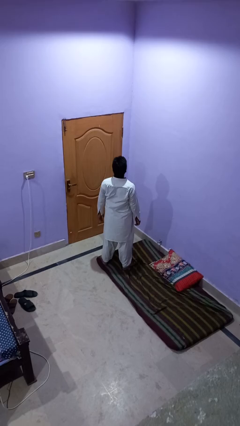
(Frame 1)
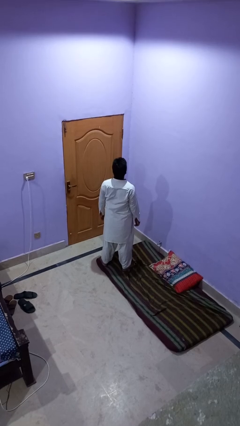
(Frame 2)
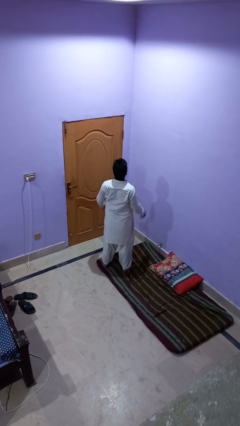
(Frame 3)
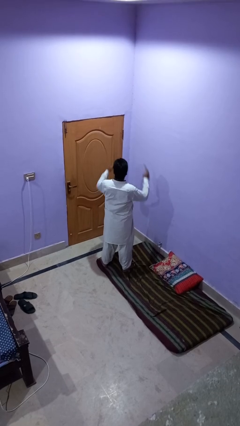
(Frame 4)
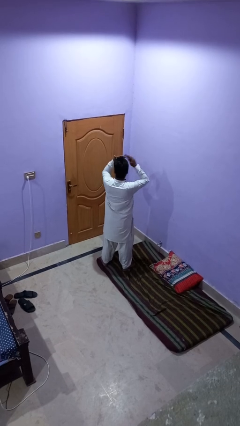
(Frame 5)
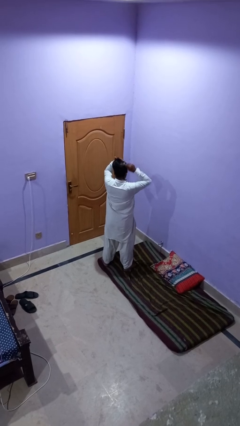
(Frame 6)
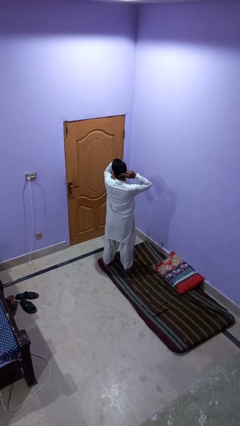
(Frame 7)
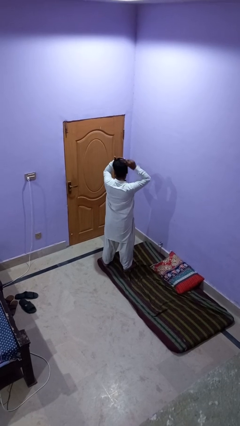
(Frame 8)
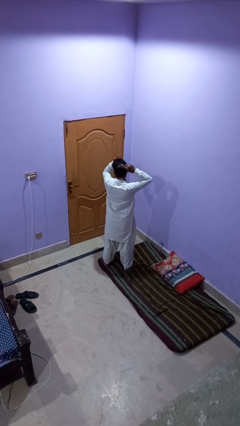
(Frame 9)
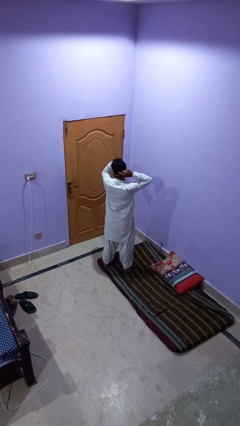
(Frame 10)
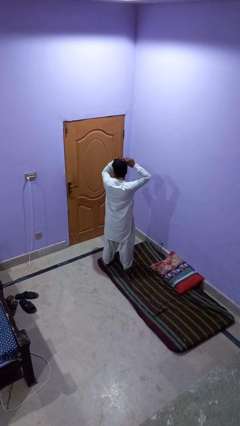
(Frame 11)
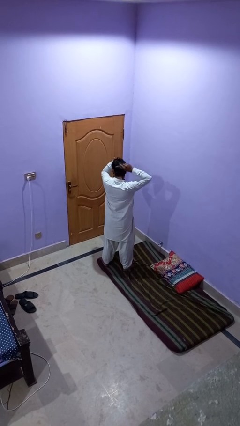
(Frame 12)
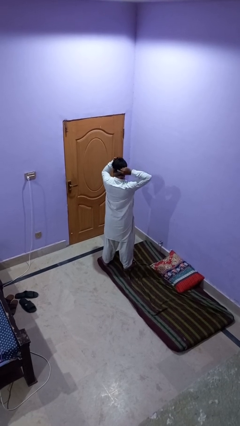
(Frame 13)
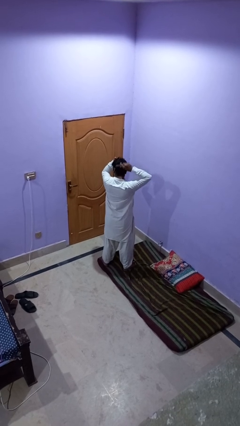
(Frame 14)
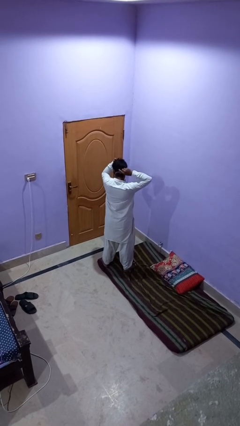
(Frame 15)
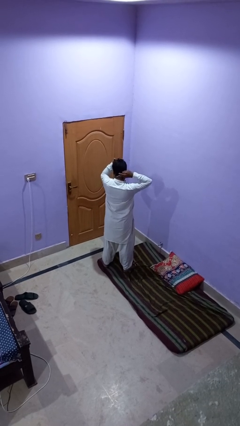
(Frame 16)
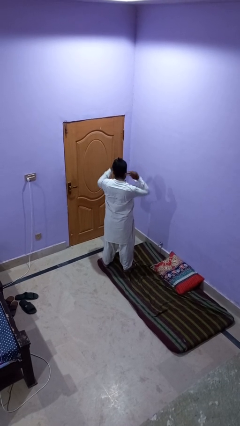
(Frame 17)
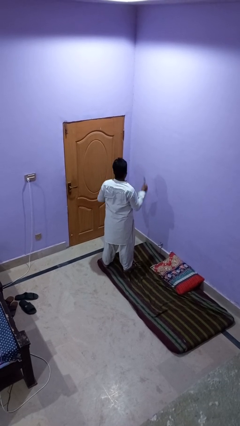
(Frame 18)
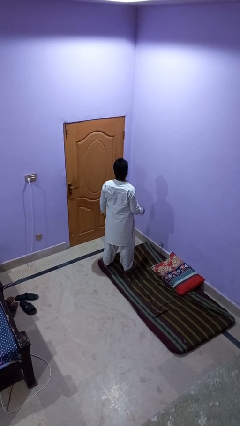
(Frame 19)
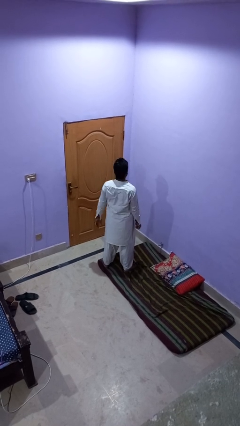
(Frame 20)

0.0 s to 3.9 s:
person brushes hair

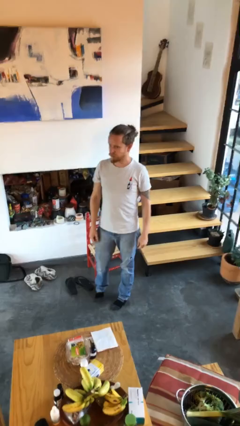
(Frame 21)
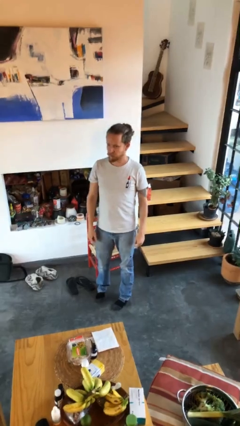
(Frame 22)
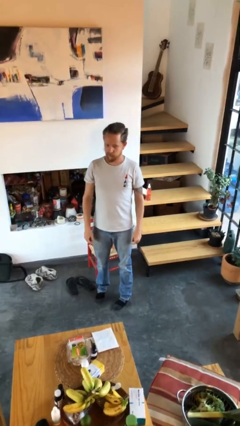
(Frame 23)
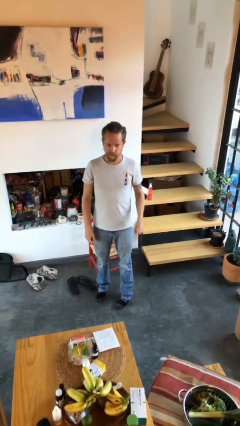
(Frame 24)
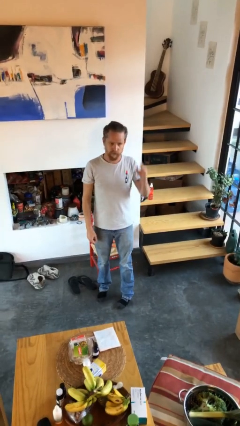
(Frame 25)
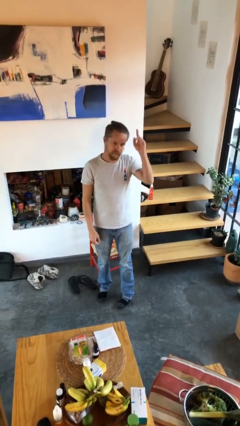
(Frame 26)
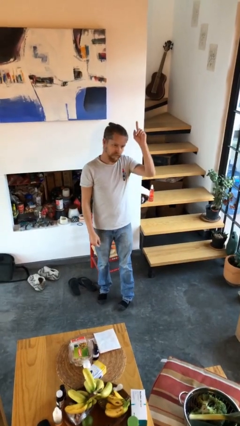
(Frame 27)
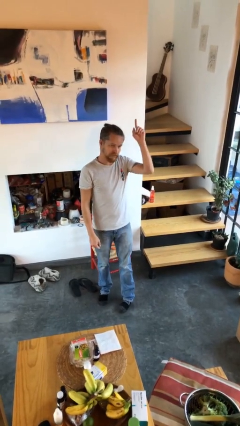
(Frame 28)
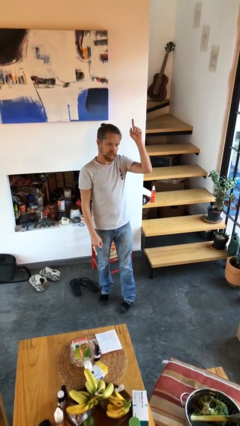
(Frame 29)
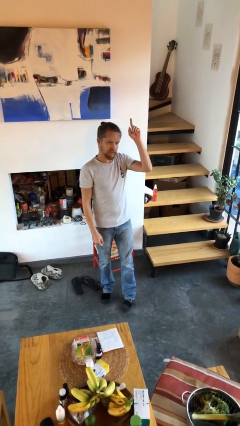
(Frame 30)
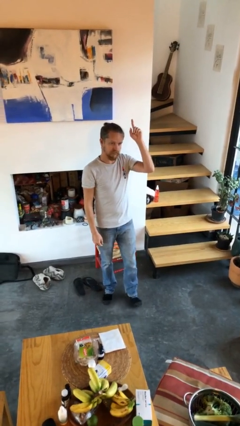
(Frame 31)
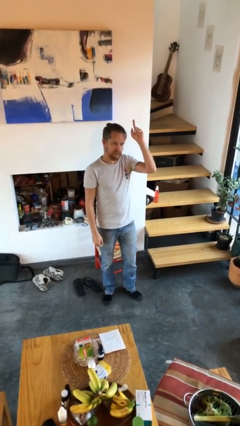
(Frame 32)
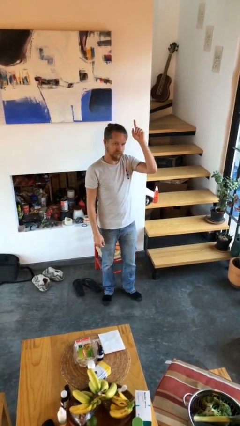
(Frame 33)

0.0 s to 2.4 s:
person gestures raise hand

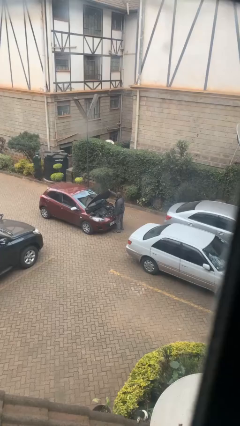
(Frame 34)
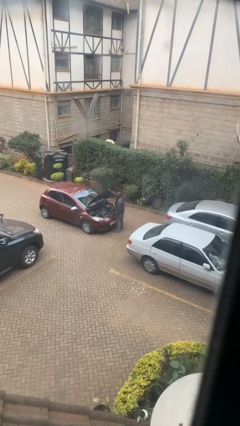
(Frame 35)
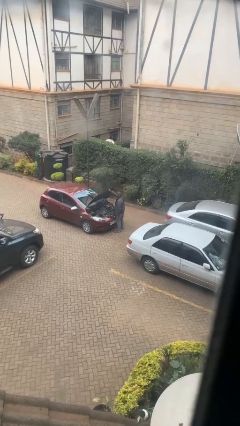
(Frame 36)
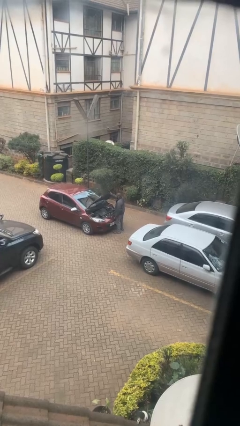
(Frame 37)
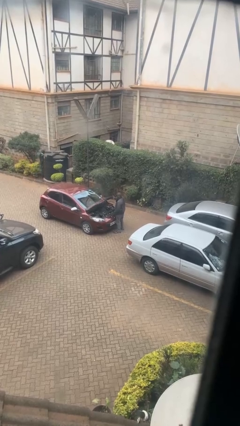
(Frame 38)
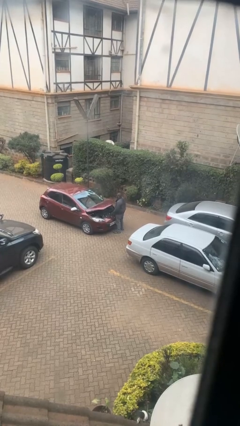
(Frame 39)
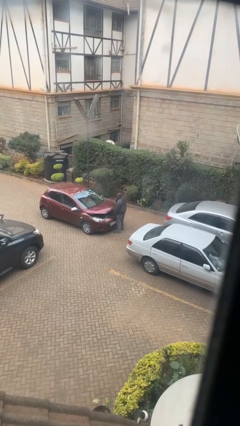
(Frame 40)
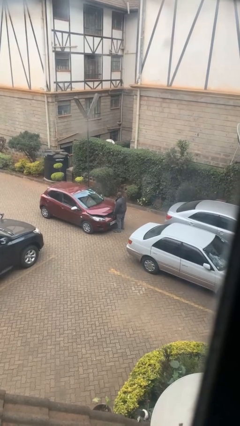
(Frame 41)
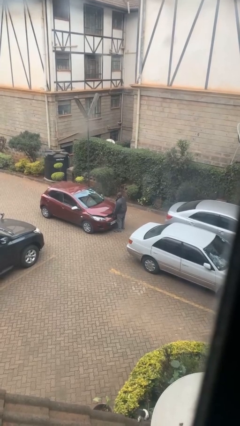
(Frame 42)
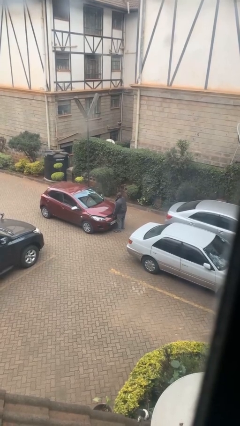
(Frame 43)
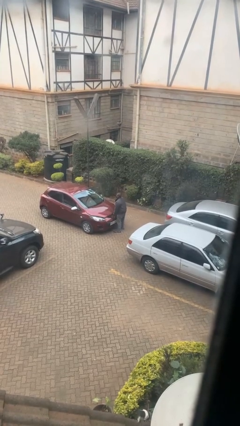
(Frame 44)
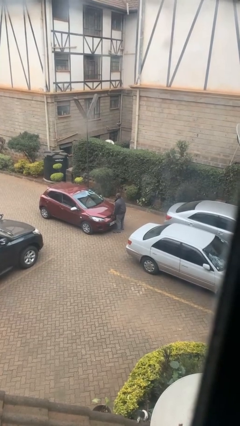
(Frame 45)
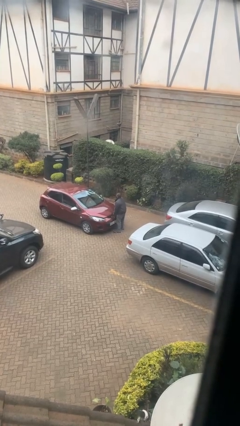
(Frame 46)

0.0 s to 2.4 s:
person closes car hood

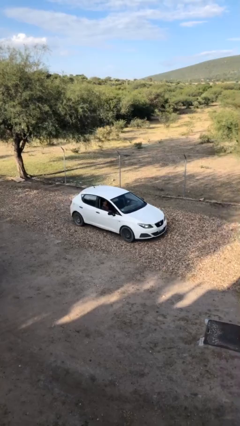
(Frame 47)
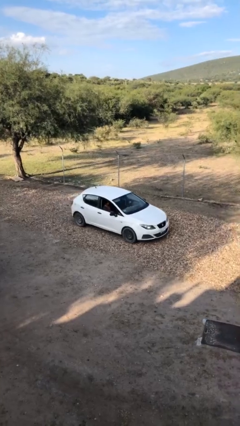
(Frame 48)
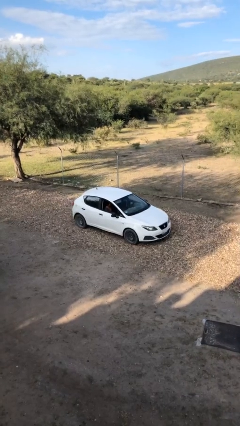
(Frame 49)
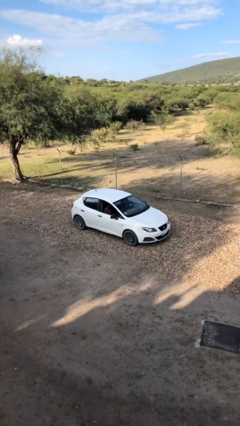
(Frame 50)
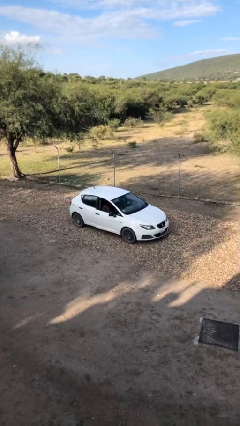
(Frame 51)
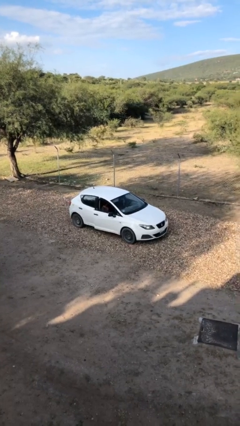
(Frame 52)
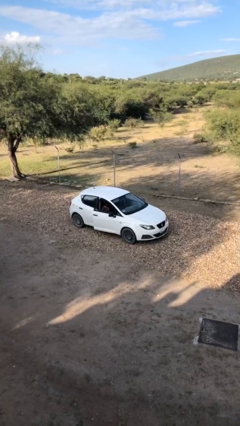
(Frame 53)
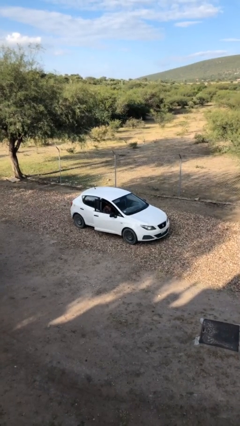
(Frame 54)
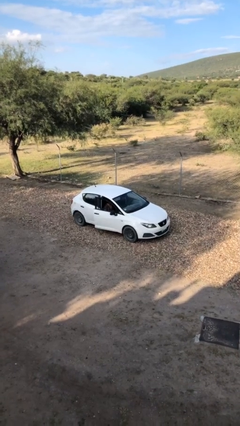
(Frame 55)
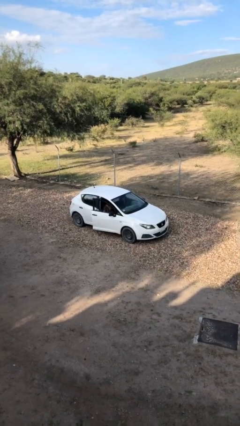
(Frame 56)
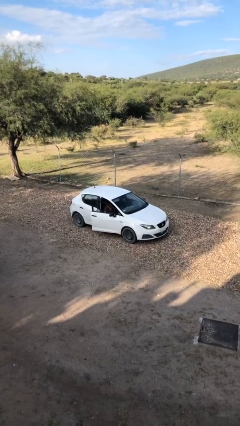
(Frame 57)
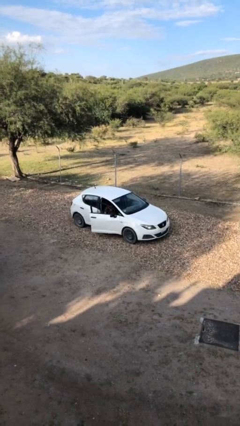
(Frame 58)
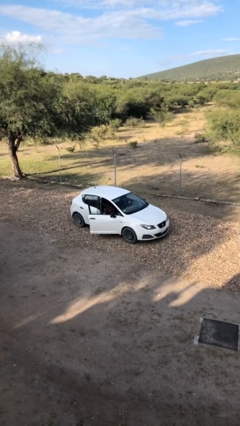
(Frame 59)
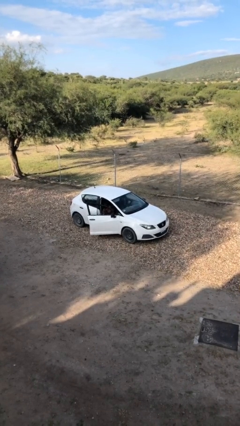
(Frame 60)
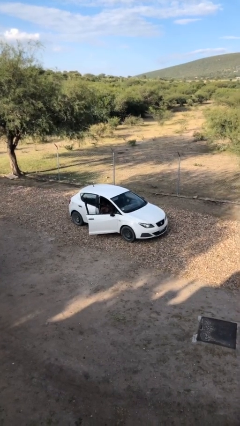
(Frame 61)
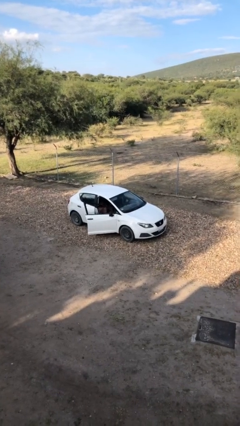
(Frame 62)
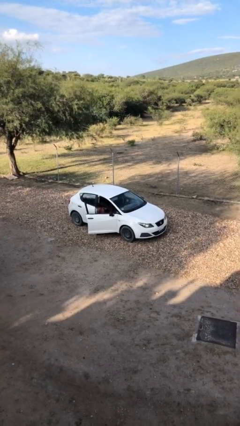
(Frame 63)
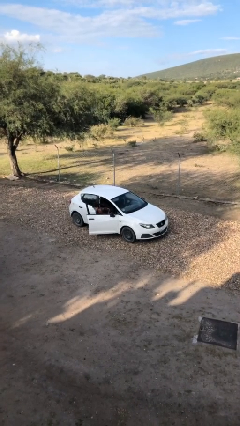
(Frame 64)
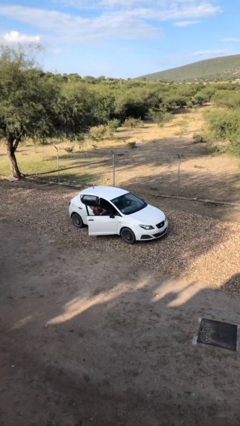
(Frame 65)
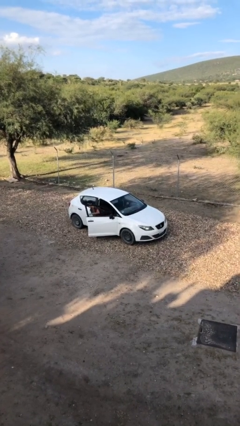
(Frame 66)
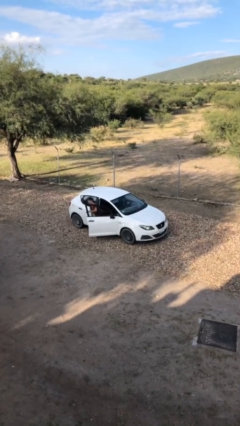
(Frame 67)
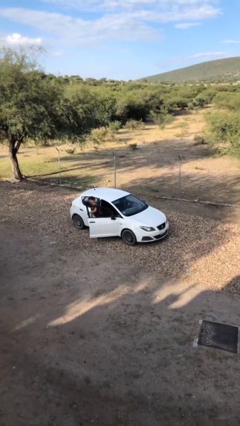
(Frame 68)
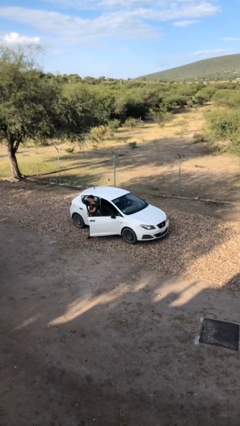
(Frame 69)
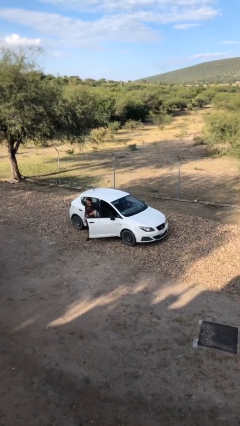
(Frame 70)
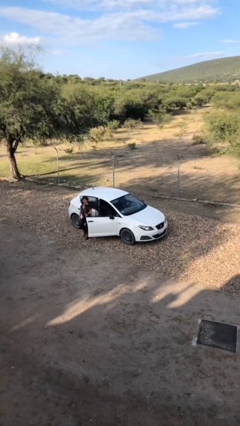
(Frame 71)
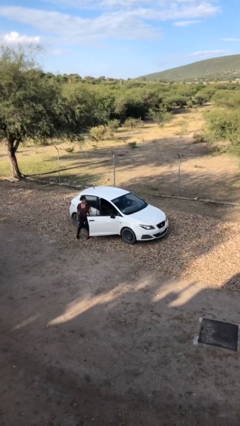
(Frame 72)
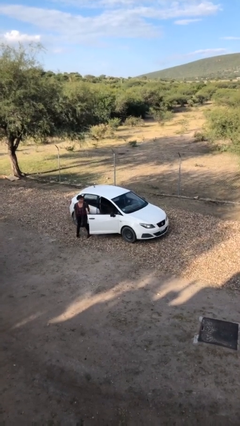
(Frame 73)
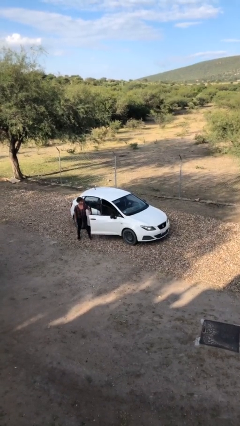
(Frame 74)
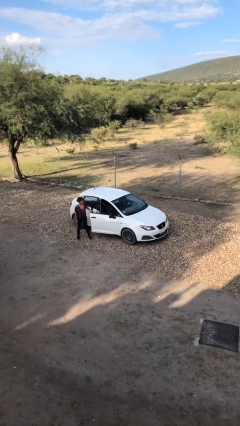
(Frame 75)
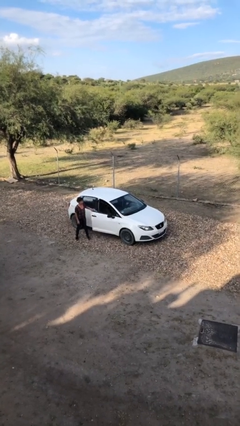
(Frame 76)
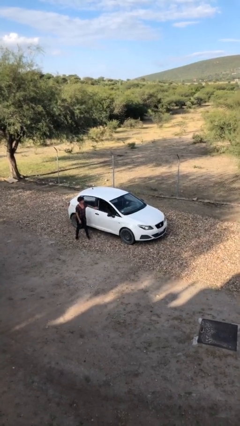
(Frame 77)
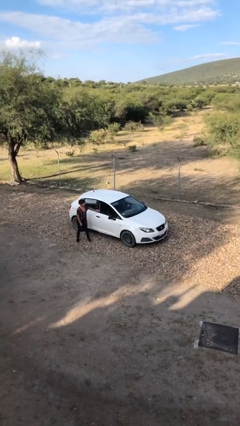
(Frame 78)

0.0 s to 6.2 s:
car drops off person

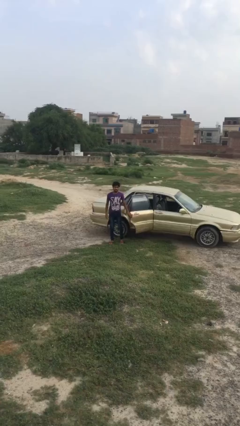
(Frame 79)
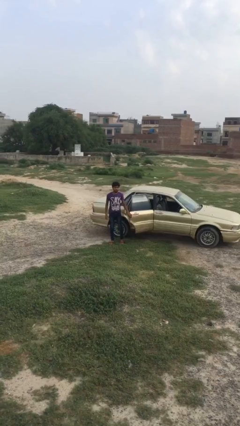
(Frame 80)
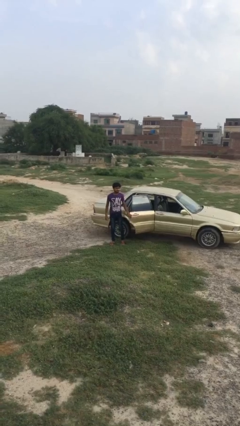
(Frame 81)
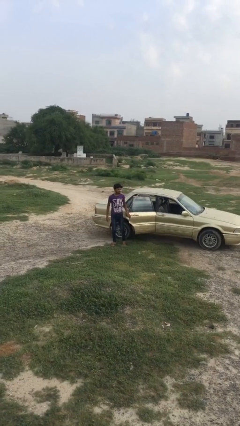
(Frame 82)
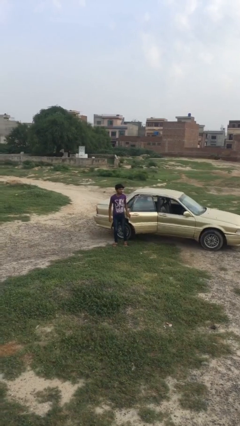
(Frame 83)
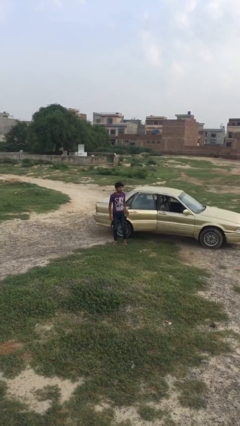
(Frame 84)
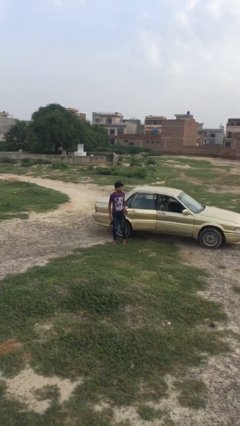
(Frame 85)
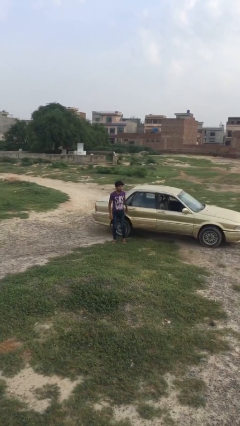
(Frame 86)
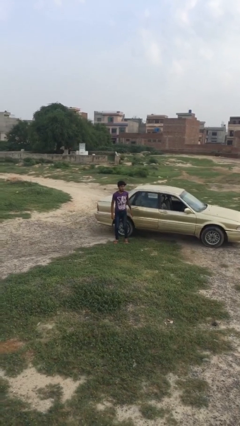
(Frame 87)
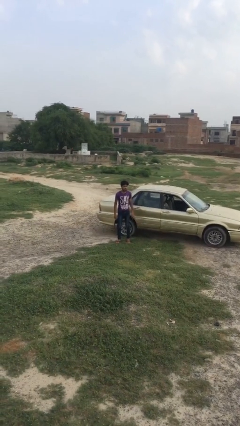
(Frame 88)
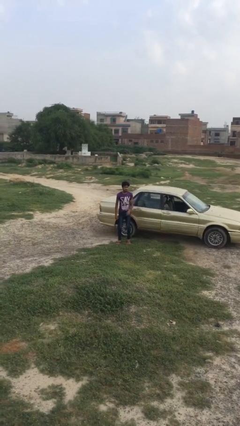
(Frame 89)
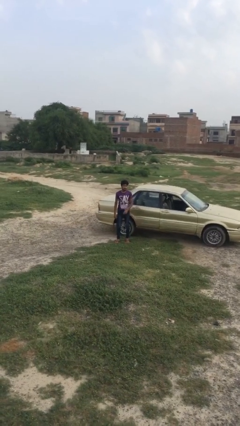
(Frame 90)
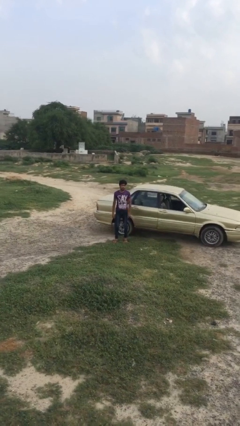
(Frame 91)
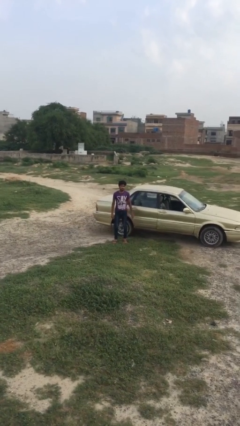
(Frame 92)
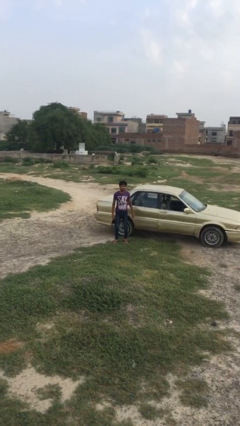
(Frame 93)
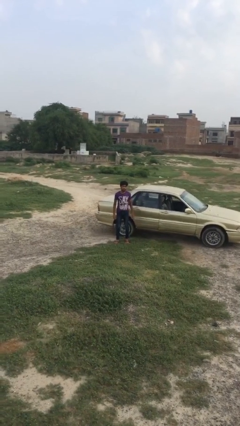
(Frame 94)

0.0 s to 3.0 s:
person closes car door
